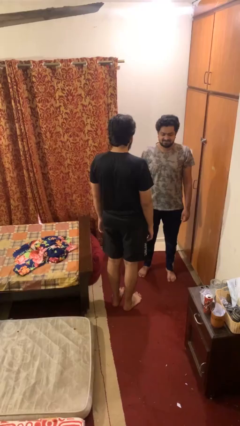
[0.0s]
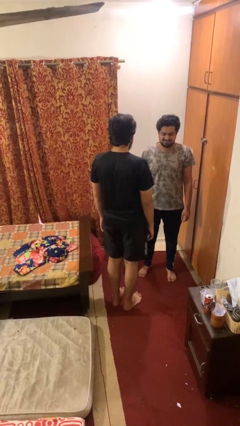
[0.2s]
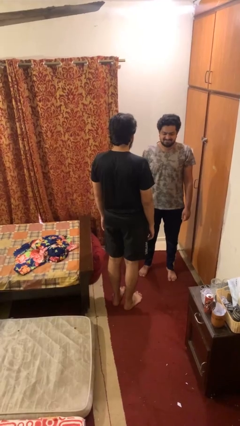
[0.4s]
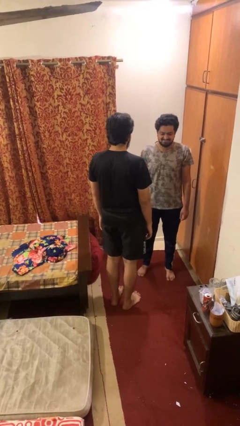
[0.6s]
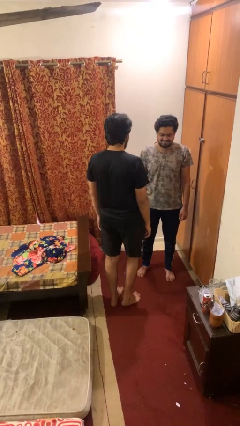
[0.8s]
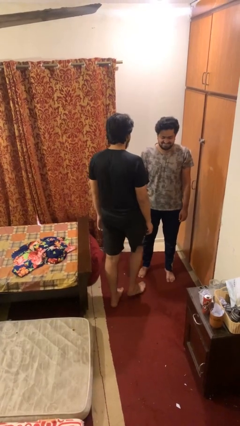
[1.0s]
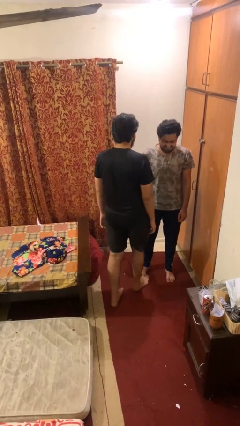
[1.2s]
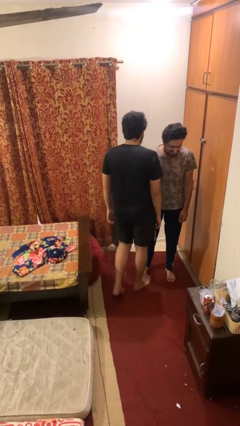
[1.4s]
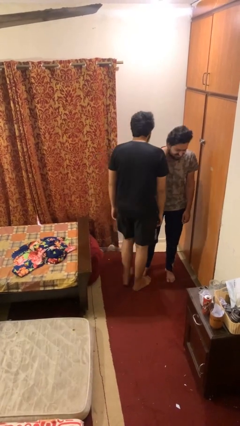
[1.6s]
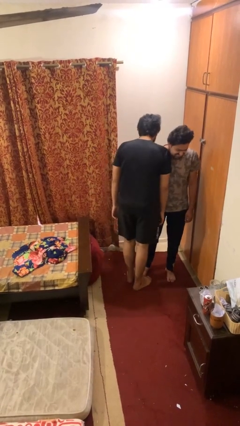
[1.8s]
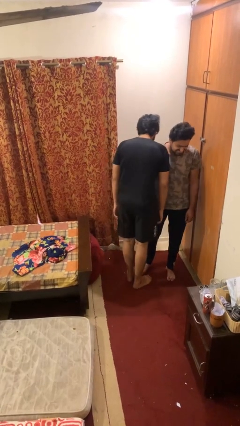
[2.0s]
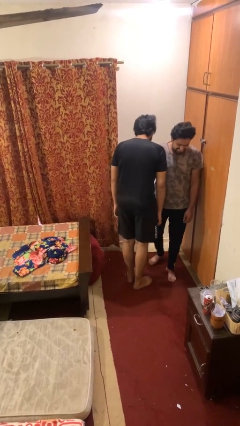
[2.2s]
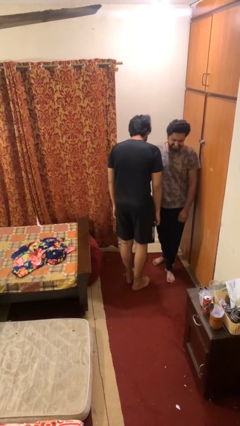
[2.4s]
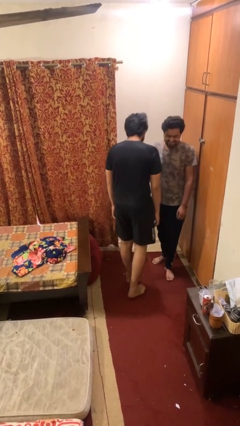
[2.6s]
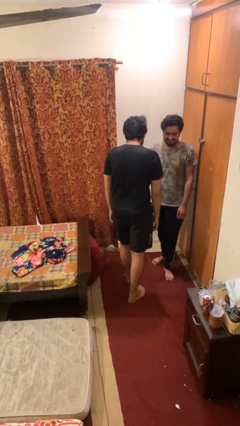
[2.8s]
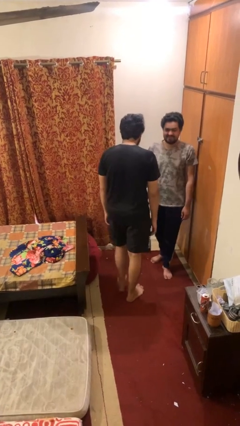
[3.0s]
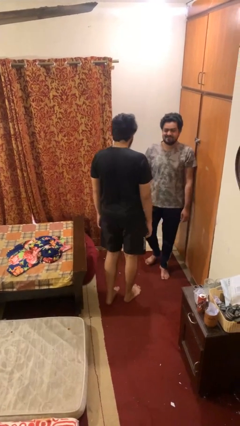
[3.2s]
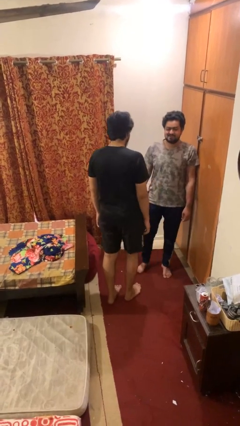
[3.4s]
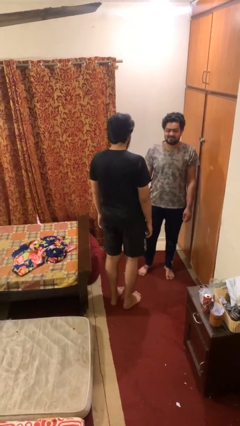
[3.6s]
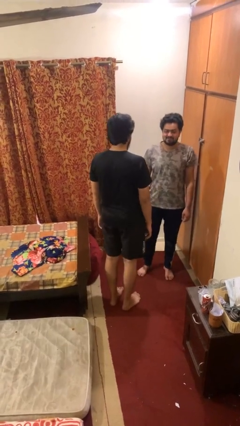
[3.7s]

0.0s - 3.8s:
person bumps into person

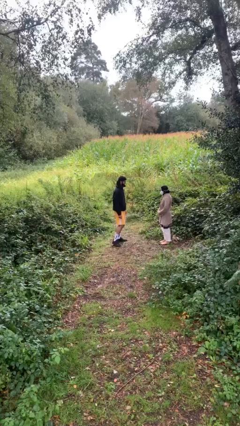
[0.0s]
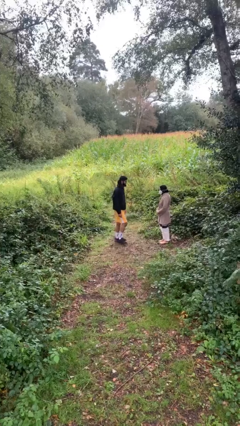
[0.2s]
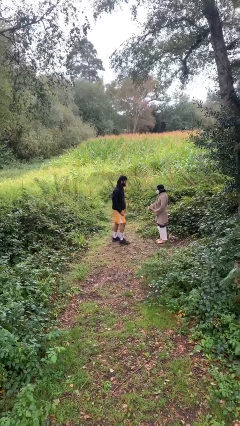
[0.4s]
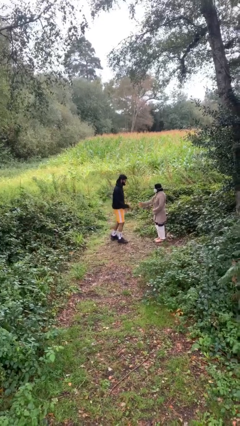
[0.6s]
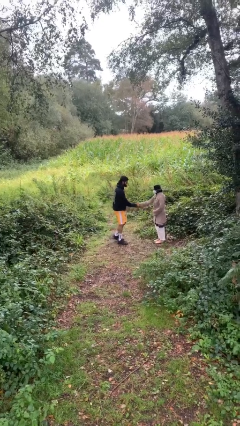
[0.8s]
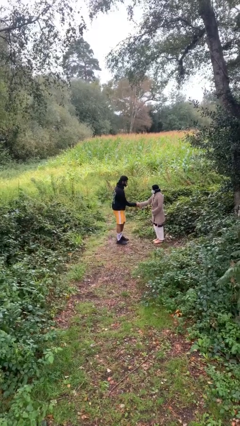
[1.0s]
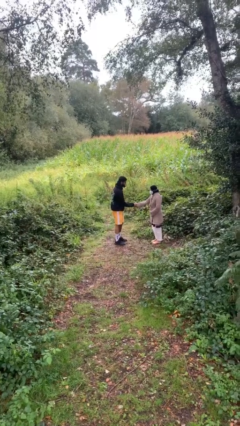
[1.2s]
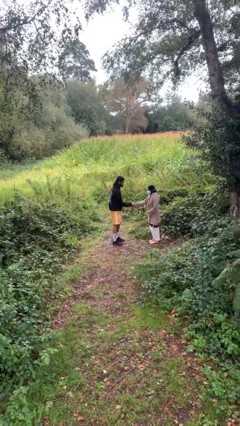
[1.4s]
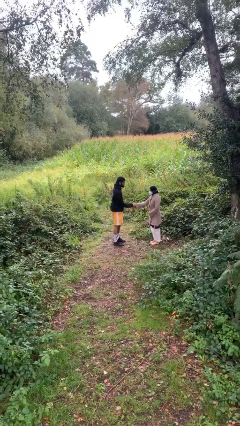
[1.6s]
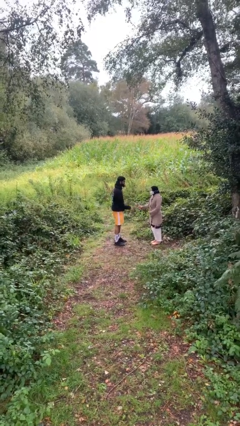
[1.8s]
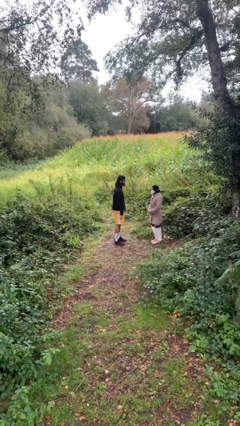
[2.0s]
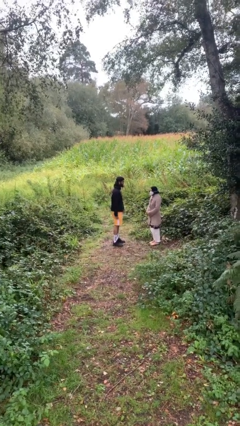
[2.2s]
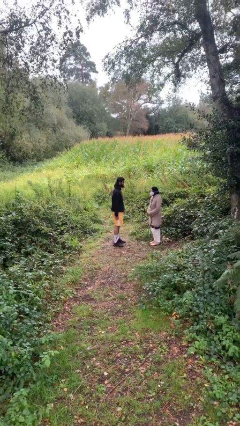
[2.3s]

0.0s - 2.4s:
person shakes hand

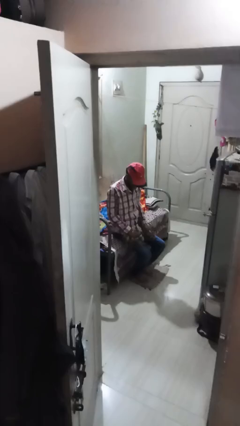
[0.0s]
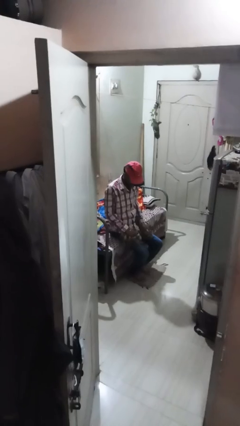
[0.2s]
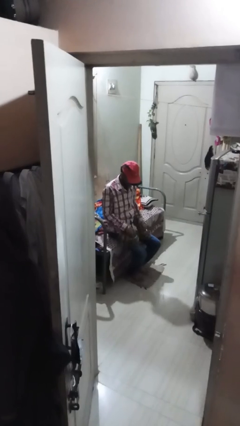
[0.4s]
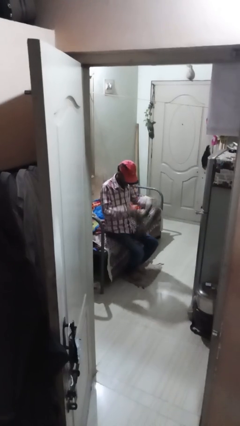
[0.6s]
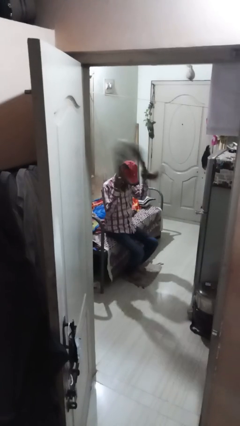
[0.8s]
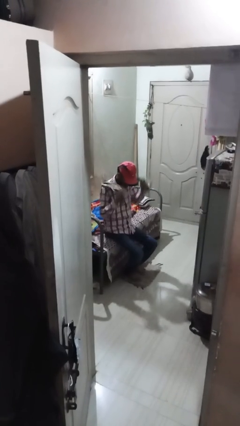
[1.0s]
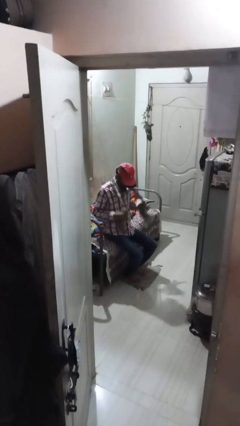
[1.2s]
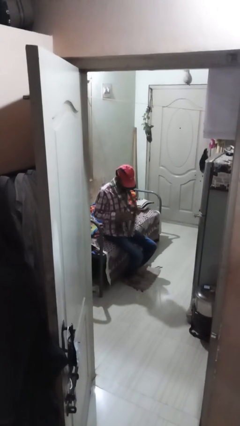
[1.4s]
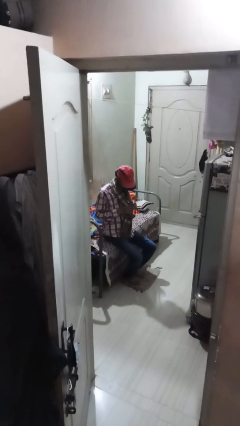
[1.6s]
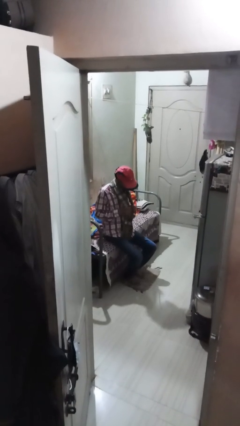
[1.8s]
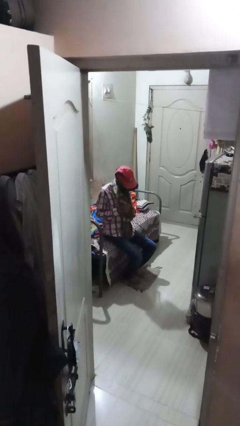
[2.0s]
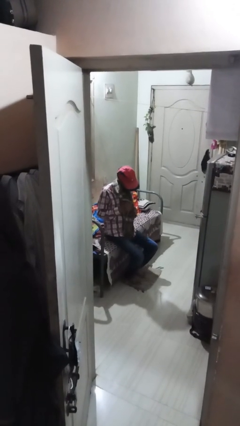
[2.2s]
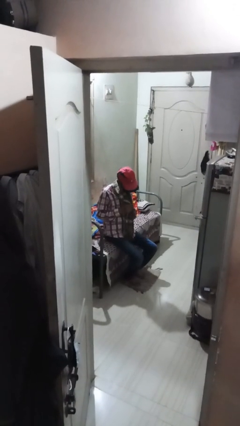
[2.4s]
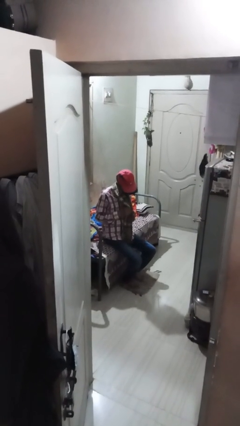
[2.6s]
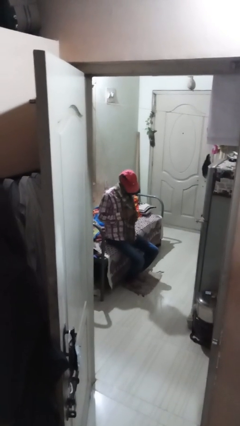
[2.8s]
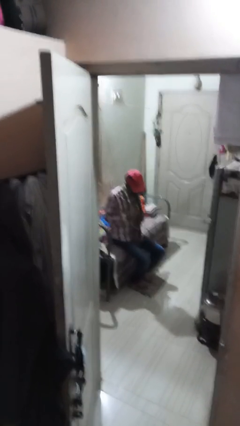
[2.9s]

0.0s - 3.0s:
person puts on scarf

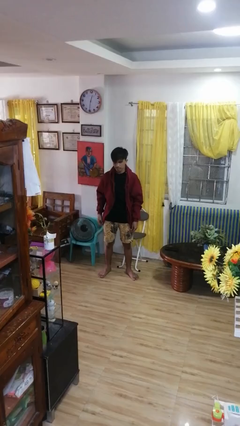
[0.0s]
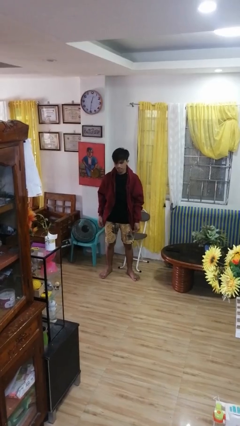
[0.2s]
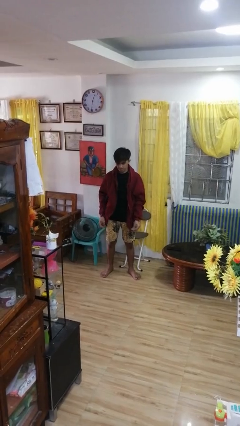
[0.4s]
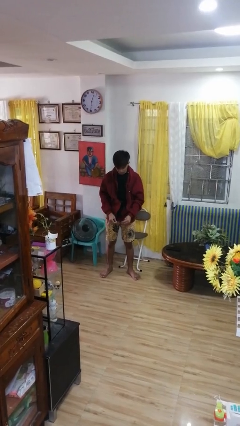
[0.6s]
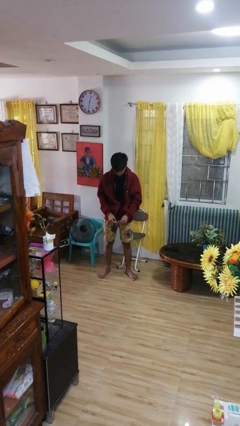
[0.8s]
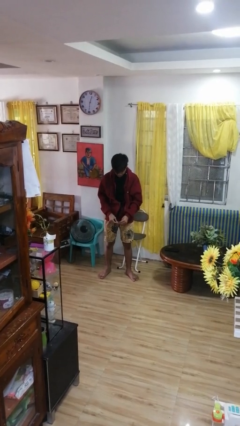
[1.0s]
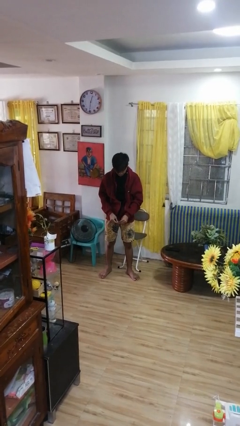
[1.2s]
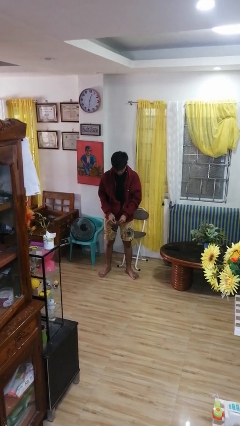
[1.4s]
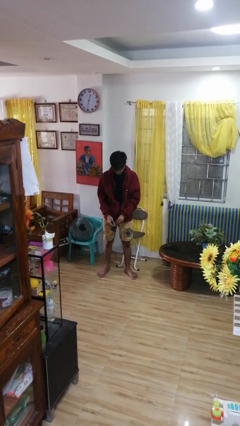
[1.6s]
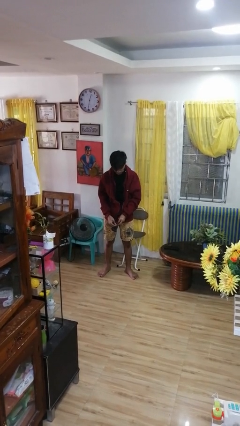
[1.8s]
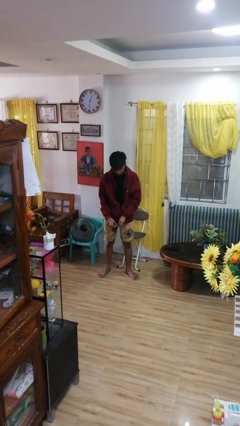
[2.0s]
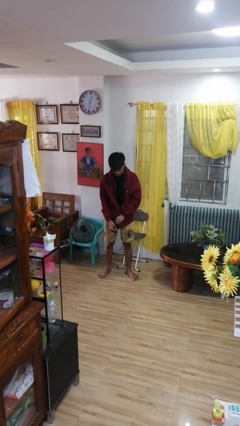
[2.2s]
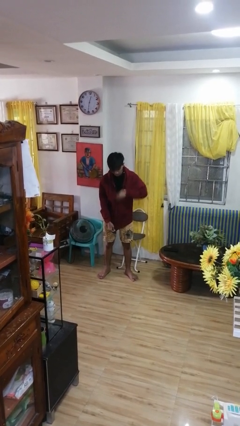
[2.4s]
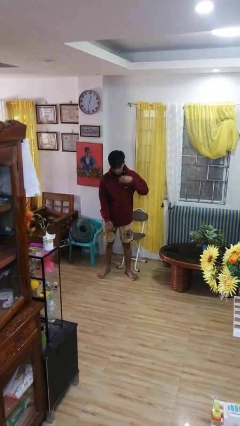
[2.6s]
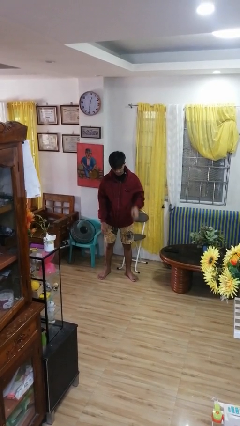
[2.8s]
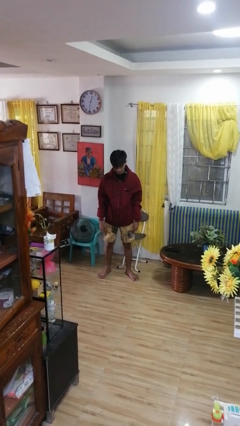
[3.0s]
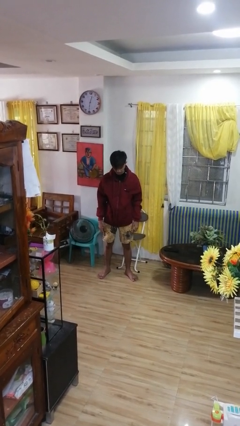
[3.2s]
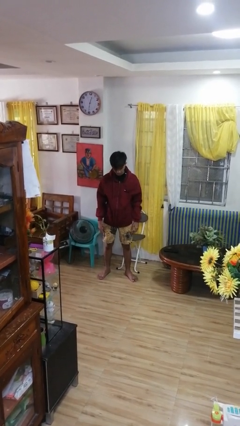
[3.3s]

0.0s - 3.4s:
person zips up jacket

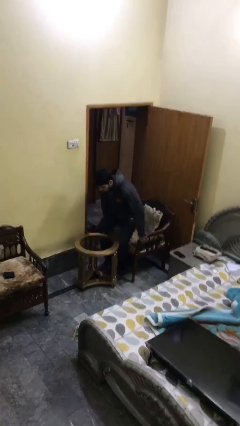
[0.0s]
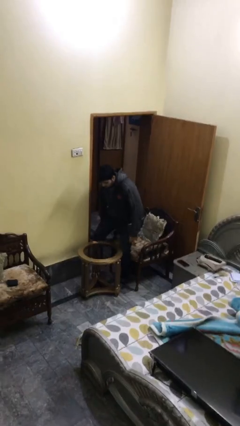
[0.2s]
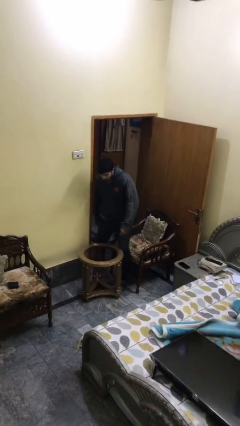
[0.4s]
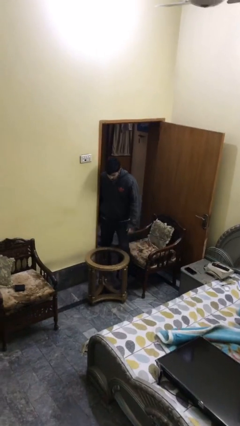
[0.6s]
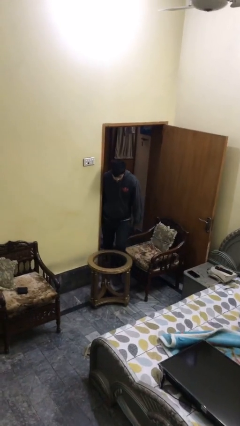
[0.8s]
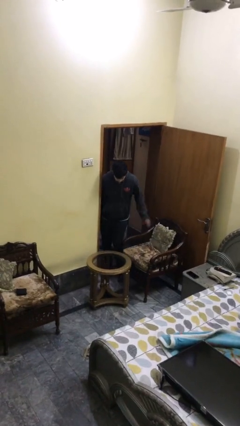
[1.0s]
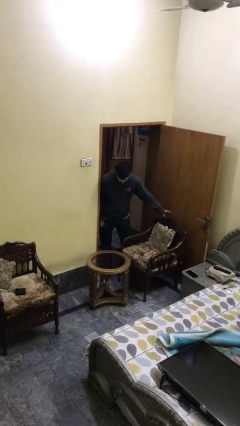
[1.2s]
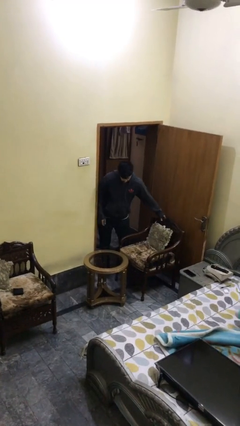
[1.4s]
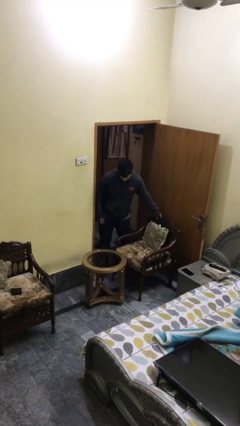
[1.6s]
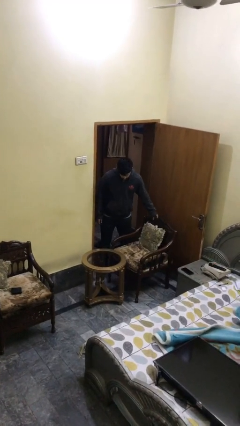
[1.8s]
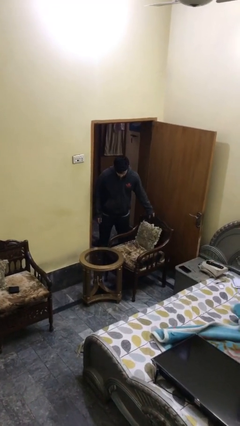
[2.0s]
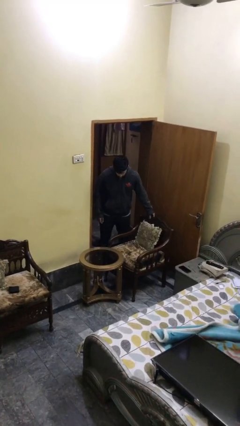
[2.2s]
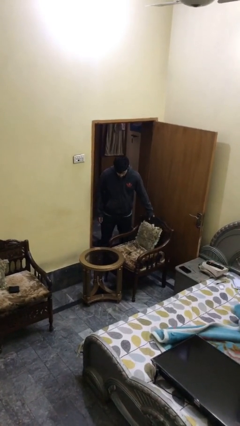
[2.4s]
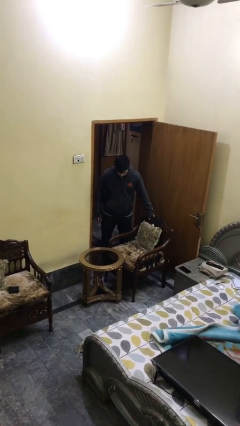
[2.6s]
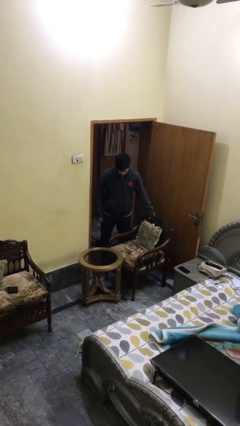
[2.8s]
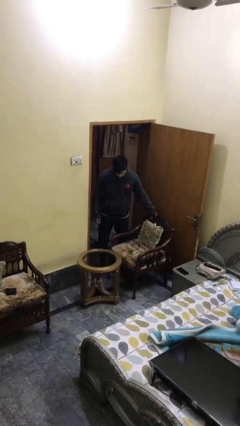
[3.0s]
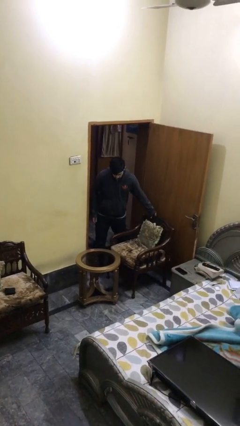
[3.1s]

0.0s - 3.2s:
person stands up

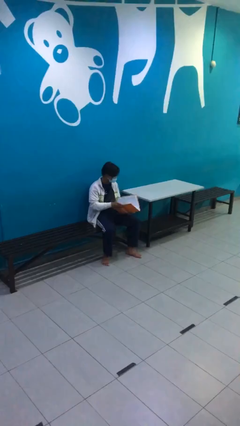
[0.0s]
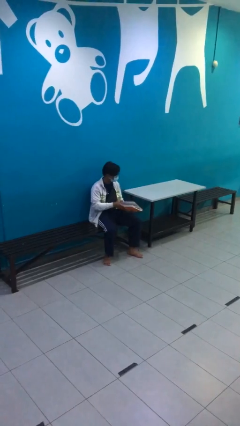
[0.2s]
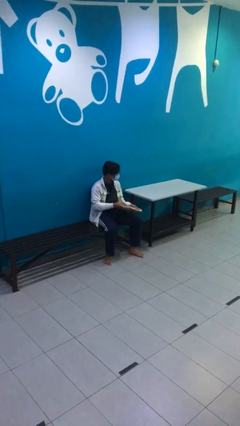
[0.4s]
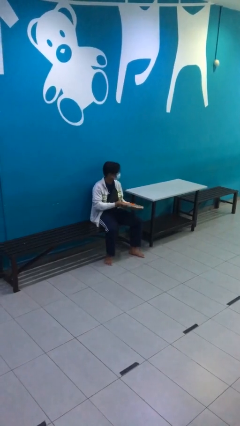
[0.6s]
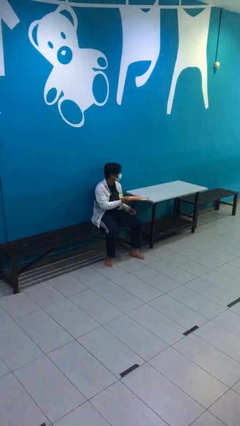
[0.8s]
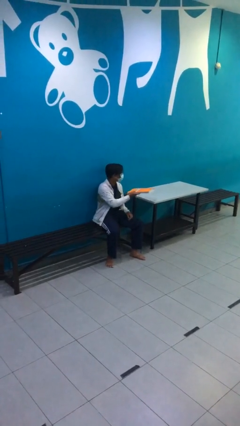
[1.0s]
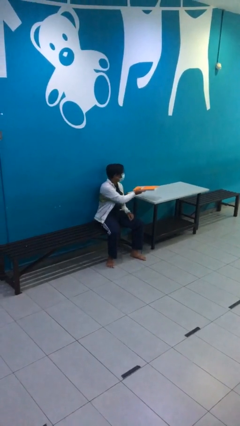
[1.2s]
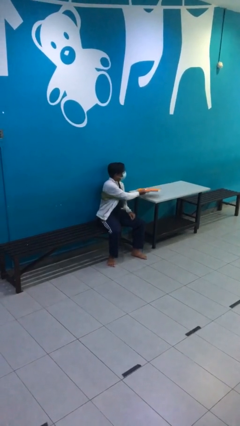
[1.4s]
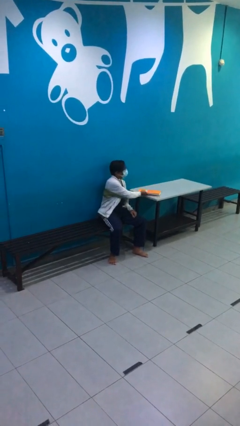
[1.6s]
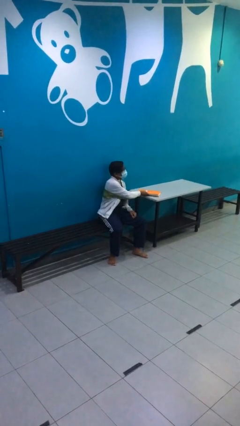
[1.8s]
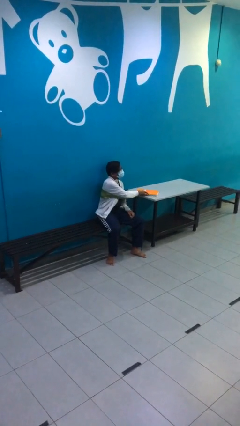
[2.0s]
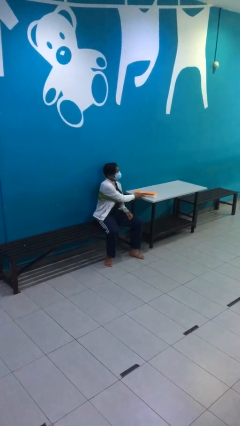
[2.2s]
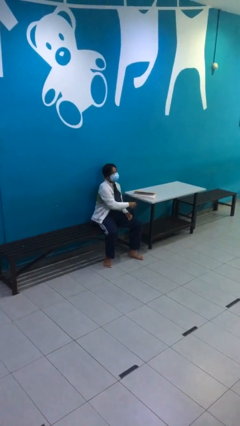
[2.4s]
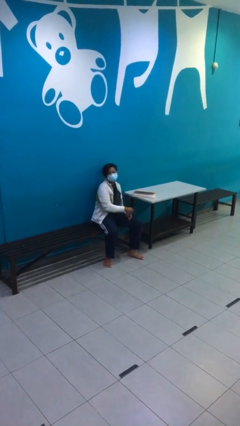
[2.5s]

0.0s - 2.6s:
person puts down object on table
